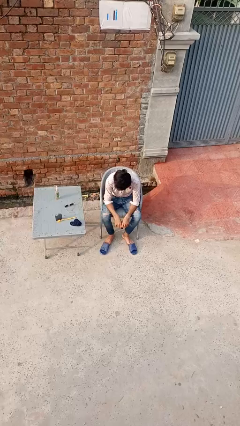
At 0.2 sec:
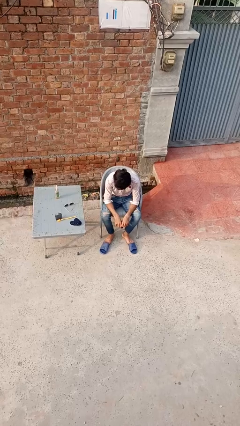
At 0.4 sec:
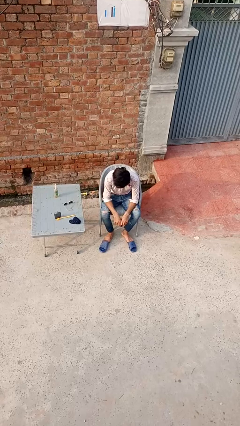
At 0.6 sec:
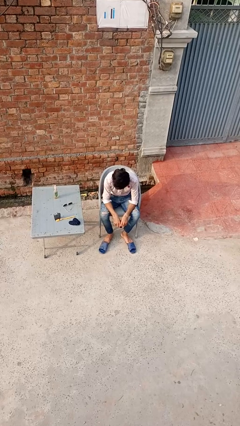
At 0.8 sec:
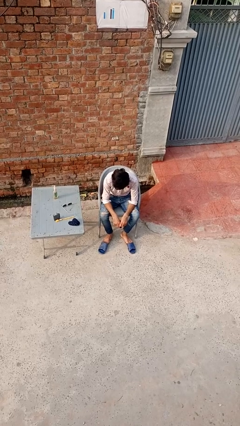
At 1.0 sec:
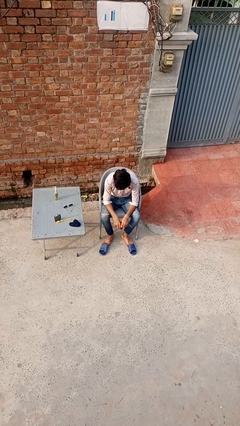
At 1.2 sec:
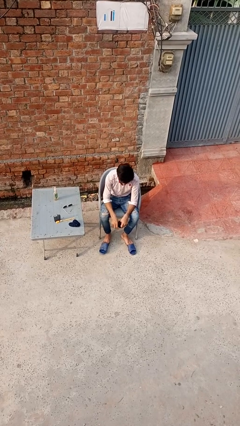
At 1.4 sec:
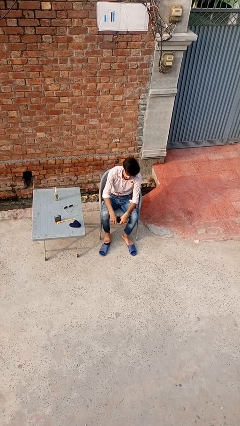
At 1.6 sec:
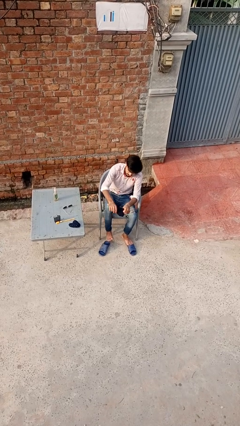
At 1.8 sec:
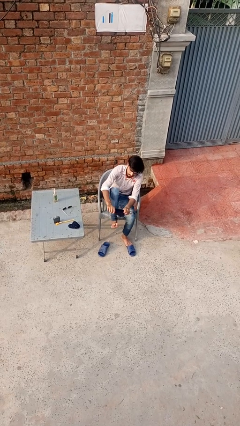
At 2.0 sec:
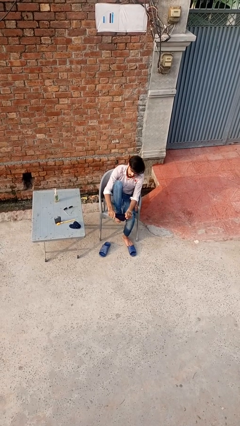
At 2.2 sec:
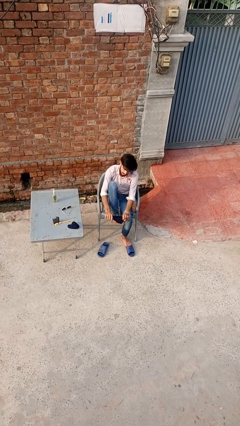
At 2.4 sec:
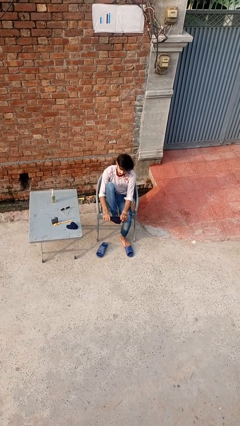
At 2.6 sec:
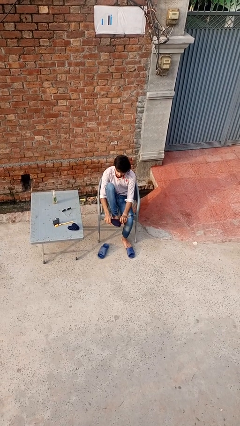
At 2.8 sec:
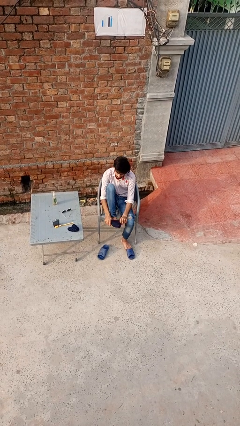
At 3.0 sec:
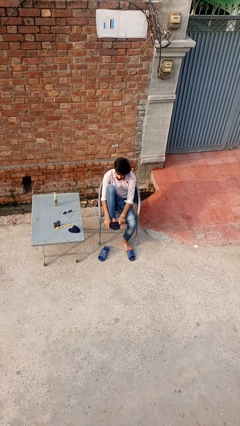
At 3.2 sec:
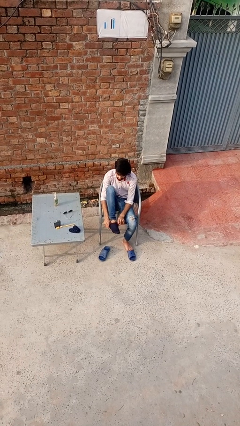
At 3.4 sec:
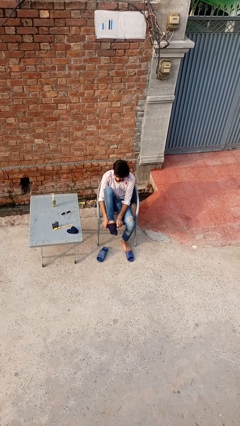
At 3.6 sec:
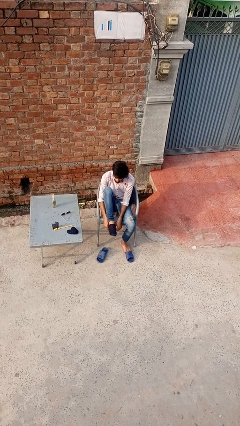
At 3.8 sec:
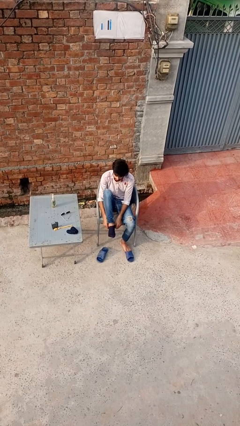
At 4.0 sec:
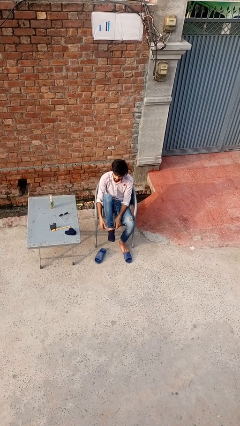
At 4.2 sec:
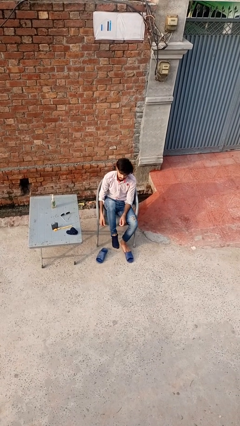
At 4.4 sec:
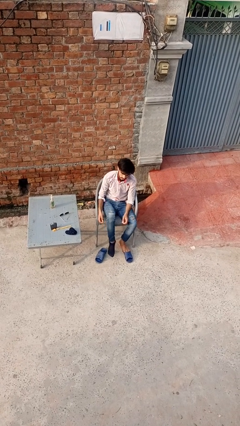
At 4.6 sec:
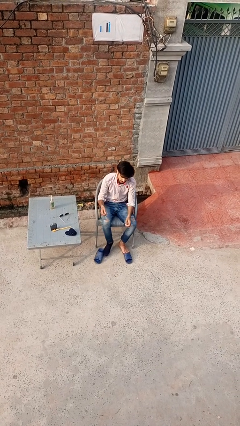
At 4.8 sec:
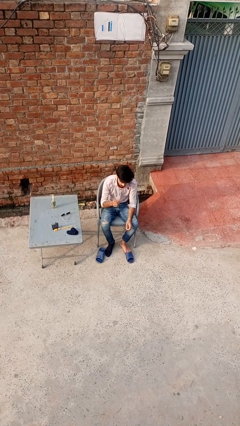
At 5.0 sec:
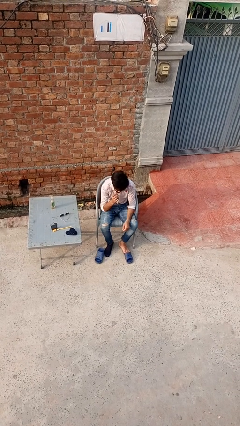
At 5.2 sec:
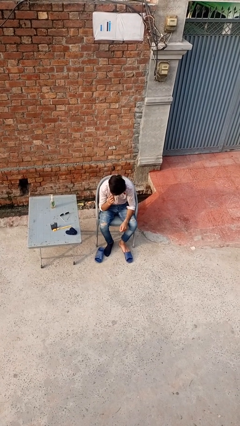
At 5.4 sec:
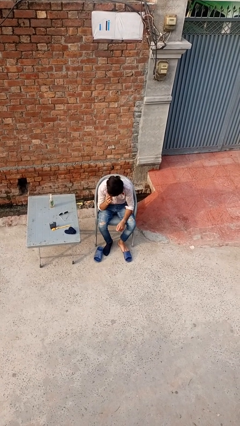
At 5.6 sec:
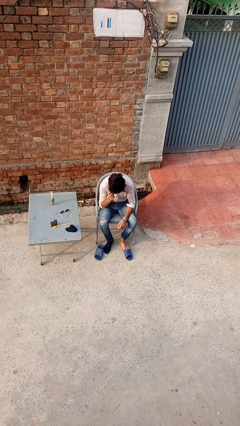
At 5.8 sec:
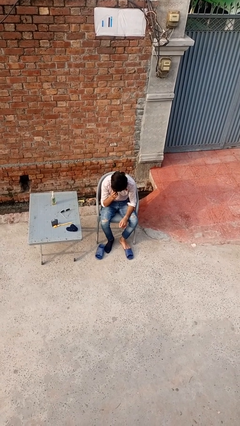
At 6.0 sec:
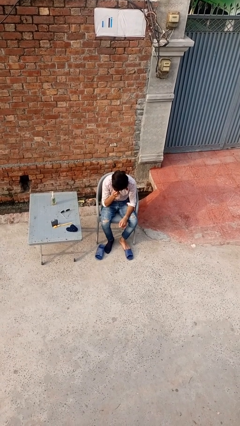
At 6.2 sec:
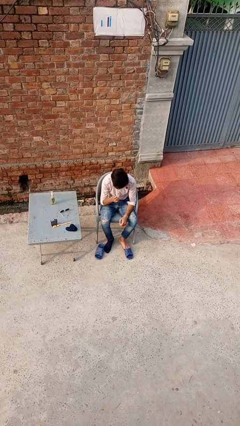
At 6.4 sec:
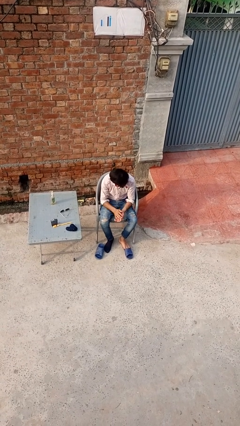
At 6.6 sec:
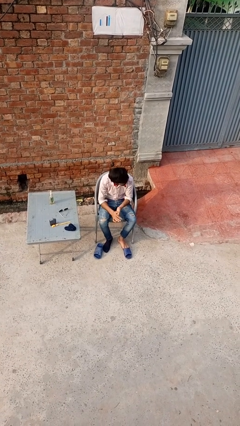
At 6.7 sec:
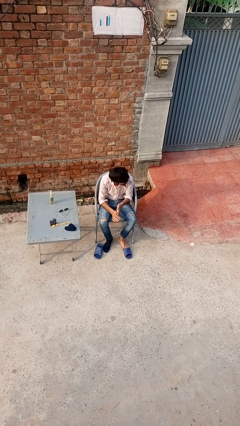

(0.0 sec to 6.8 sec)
person puts on socks

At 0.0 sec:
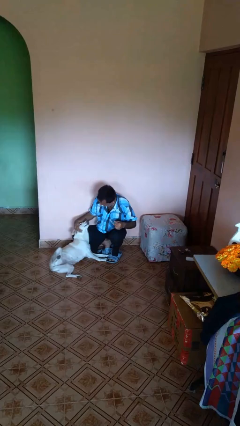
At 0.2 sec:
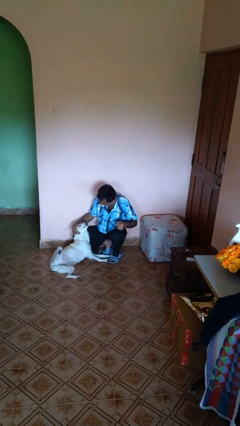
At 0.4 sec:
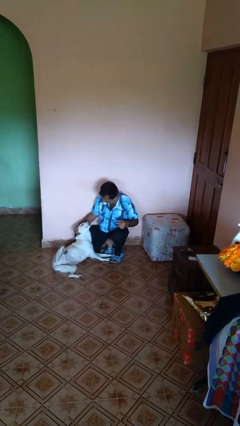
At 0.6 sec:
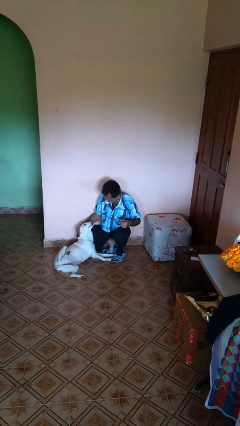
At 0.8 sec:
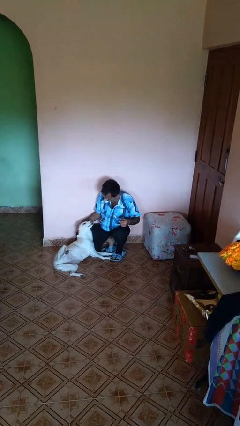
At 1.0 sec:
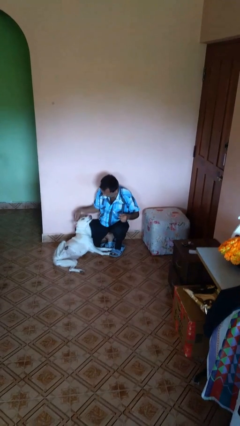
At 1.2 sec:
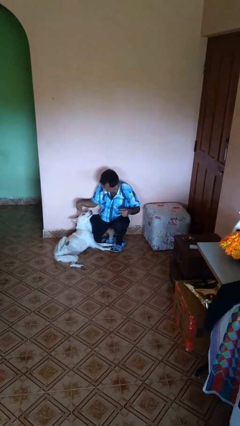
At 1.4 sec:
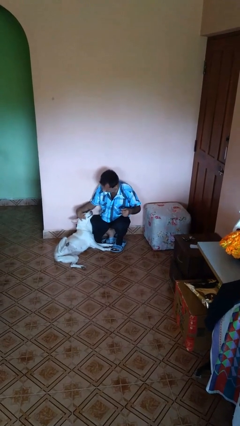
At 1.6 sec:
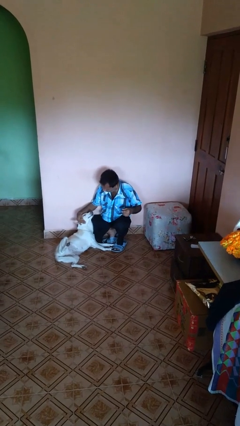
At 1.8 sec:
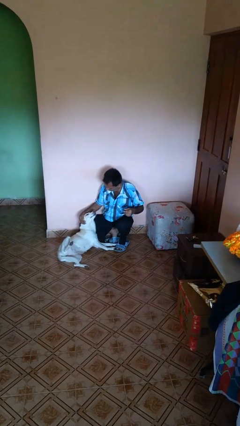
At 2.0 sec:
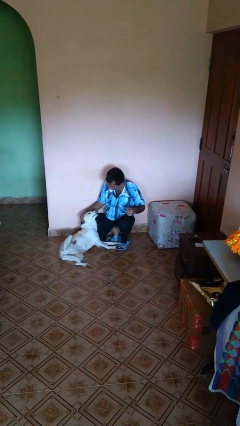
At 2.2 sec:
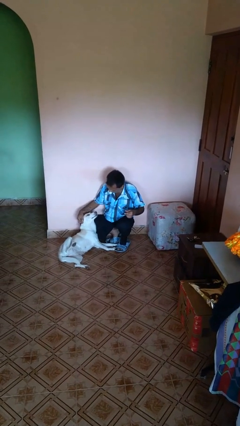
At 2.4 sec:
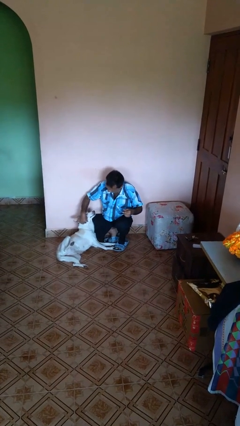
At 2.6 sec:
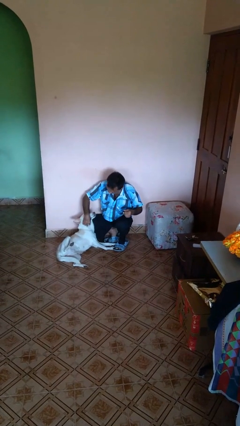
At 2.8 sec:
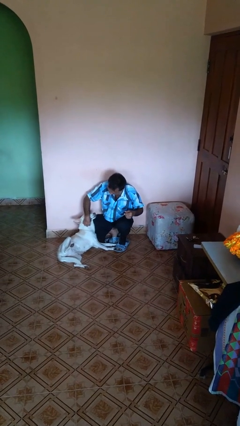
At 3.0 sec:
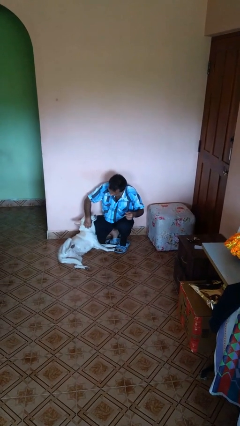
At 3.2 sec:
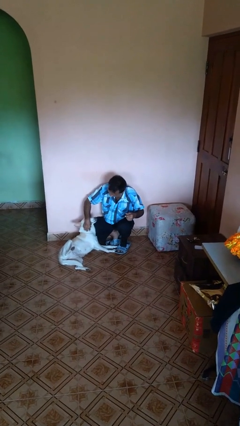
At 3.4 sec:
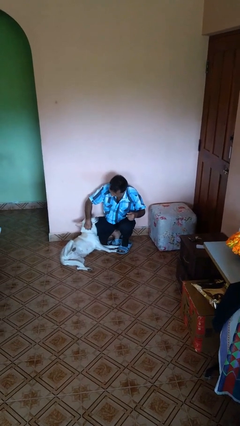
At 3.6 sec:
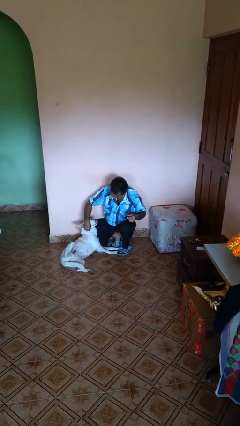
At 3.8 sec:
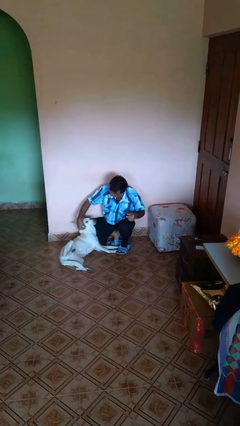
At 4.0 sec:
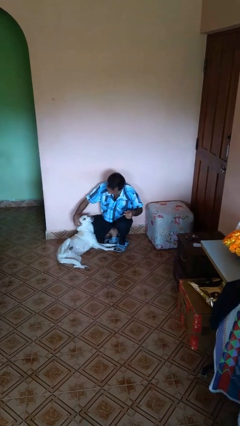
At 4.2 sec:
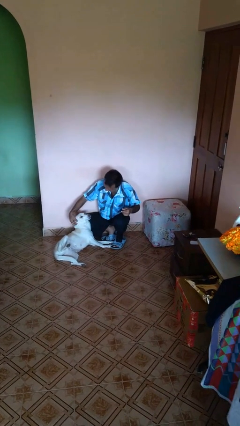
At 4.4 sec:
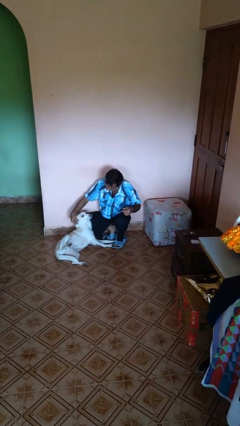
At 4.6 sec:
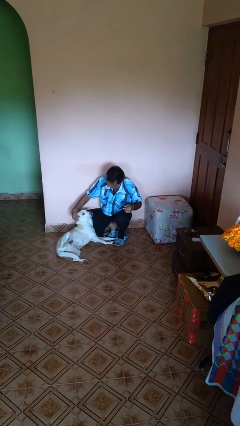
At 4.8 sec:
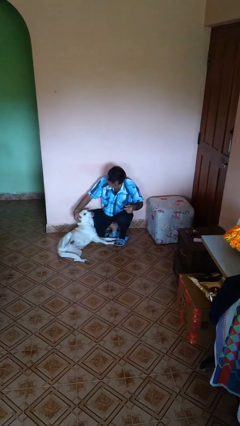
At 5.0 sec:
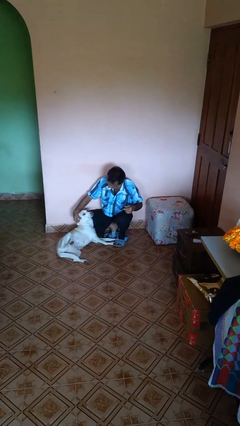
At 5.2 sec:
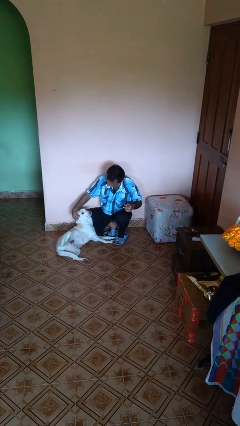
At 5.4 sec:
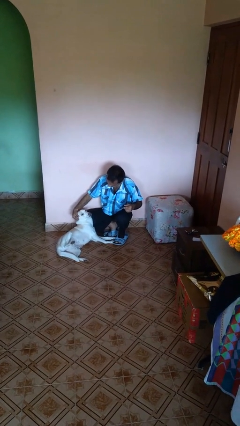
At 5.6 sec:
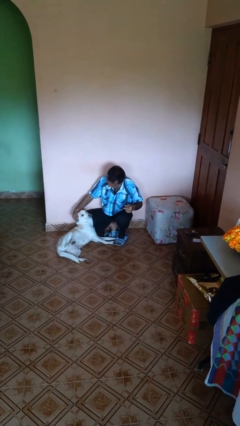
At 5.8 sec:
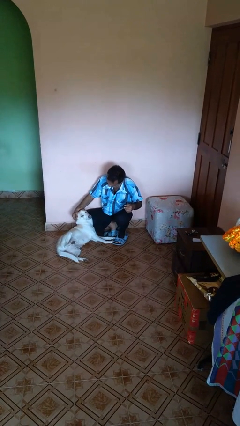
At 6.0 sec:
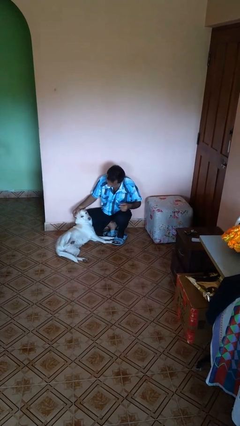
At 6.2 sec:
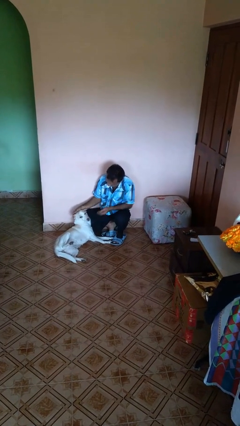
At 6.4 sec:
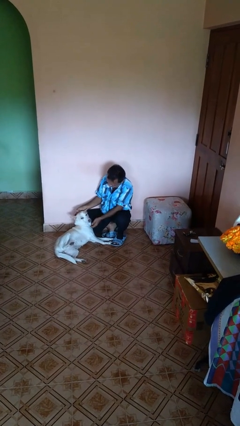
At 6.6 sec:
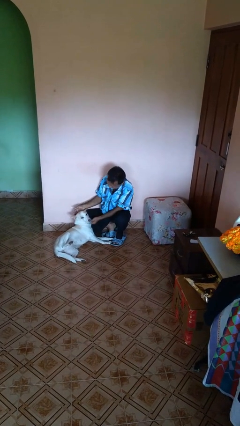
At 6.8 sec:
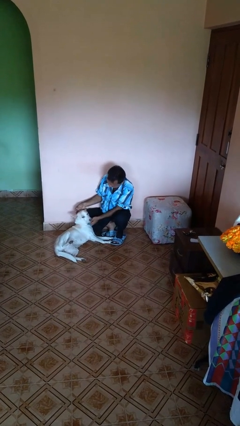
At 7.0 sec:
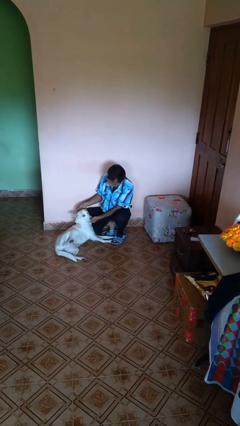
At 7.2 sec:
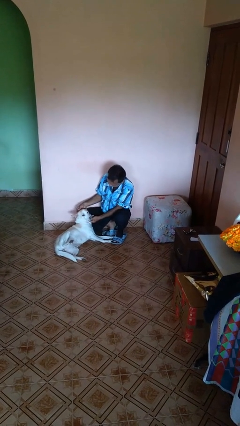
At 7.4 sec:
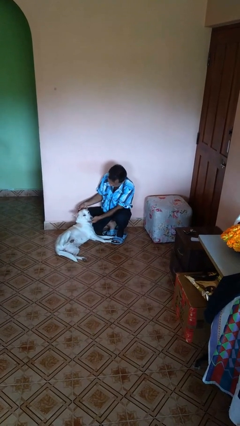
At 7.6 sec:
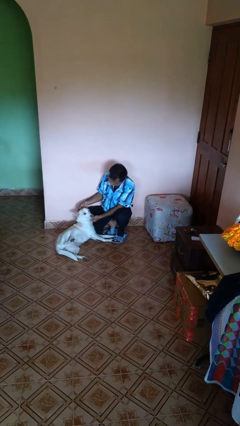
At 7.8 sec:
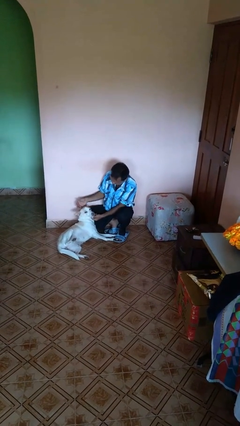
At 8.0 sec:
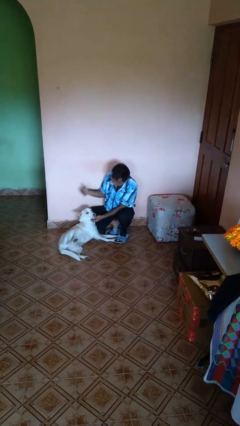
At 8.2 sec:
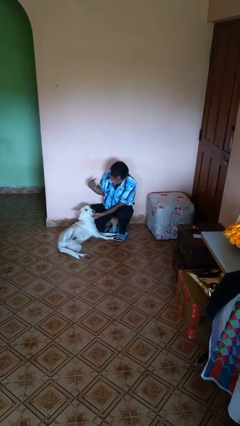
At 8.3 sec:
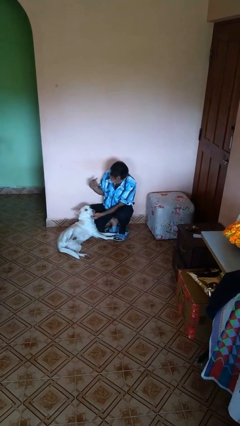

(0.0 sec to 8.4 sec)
person pets dog

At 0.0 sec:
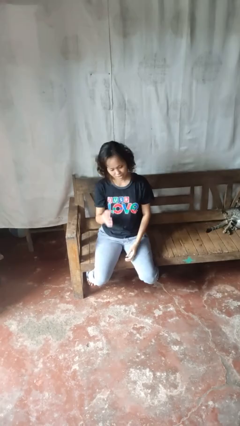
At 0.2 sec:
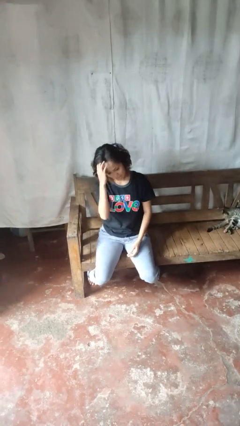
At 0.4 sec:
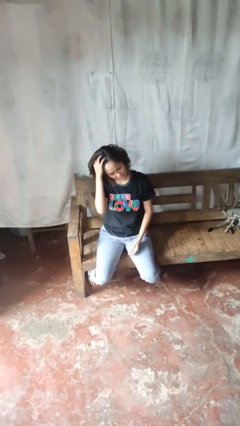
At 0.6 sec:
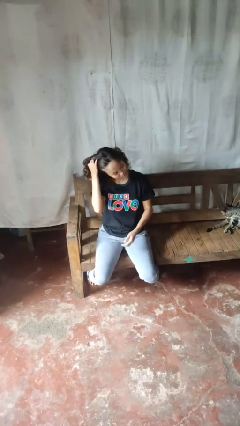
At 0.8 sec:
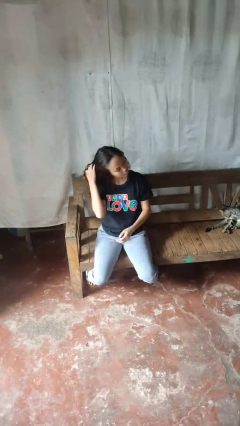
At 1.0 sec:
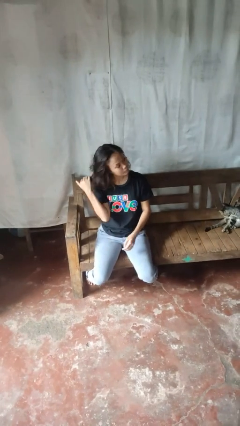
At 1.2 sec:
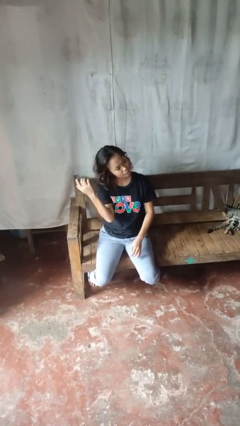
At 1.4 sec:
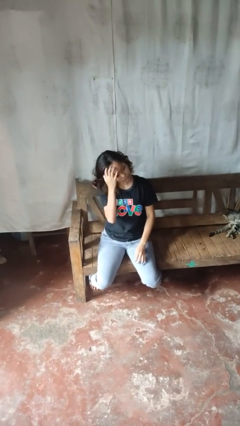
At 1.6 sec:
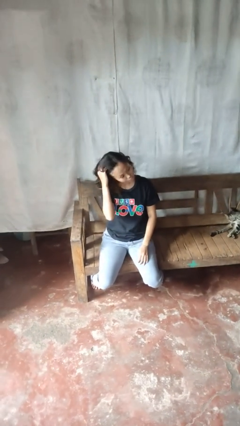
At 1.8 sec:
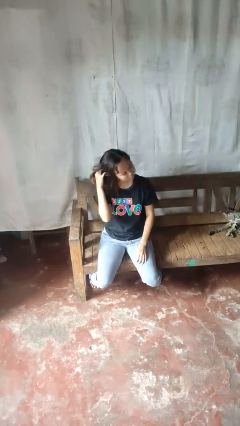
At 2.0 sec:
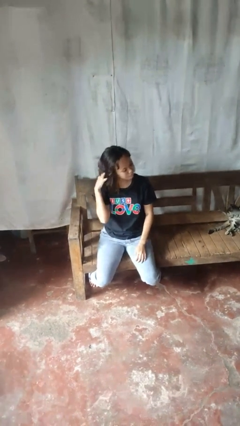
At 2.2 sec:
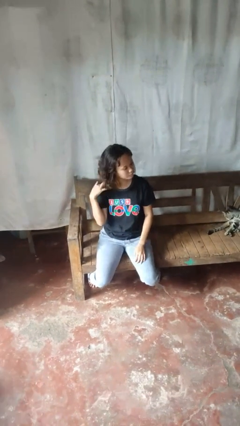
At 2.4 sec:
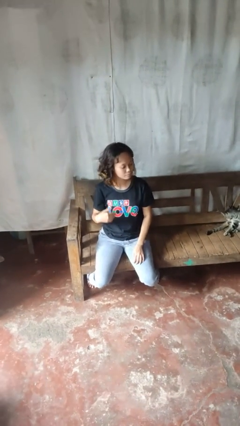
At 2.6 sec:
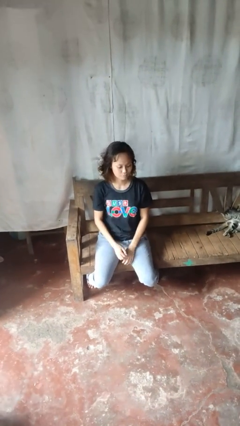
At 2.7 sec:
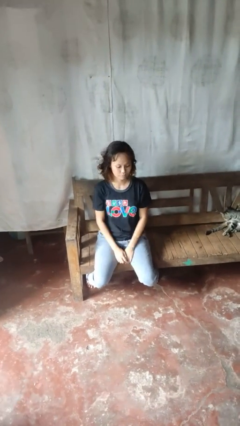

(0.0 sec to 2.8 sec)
person strokes hair
